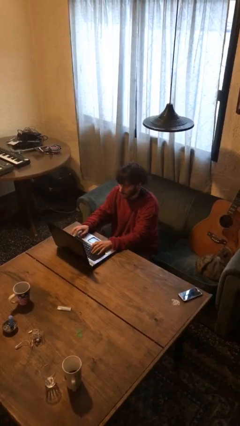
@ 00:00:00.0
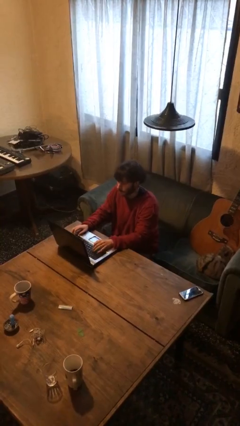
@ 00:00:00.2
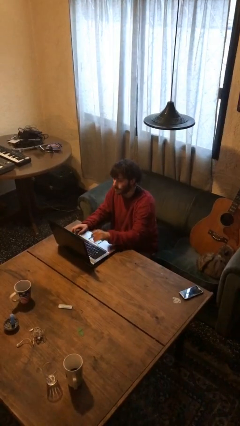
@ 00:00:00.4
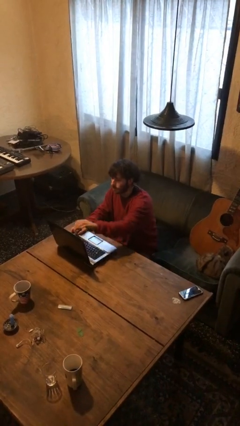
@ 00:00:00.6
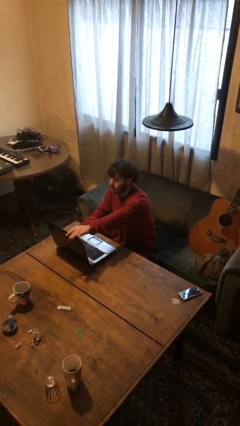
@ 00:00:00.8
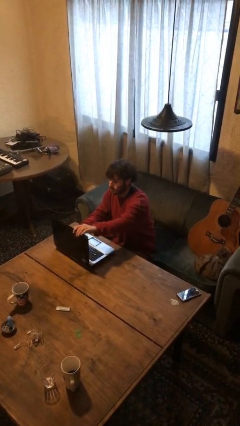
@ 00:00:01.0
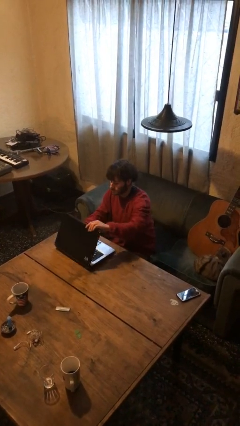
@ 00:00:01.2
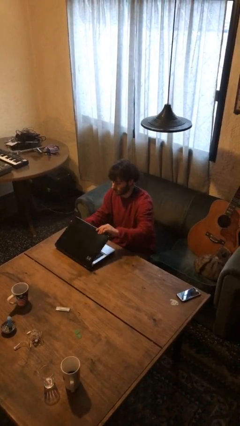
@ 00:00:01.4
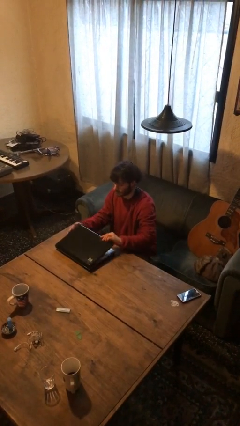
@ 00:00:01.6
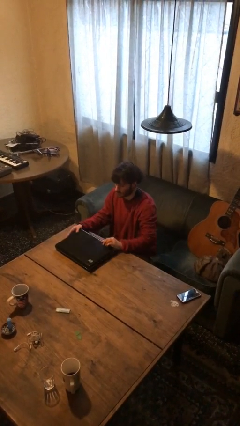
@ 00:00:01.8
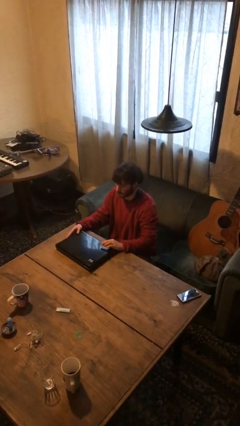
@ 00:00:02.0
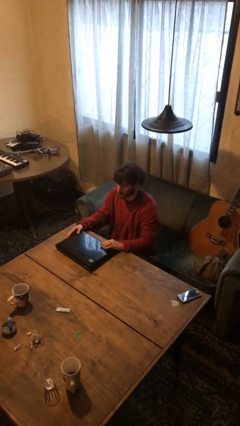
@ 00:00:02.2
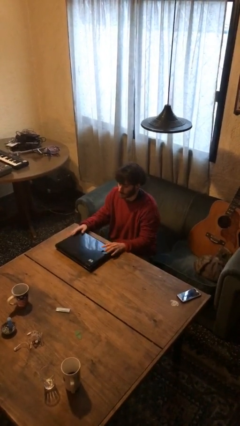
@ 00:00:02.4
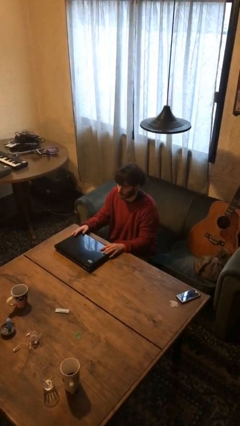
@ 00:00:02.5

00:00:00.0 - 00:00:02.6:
person closes laptop

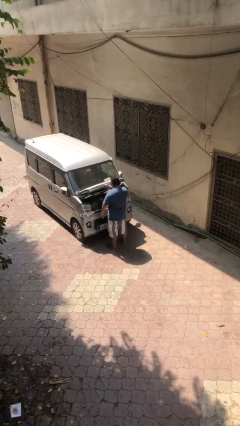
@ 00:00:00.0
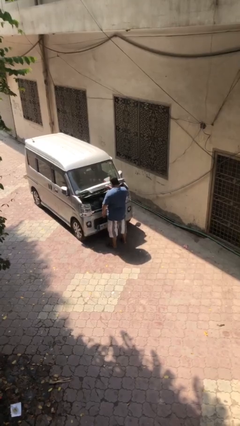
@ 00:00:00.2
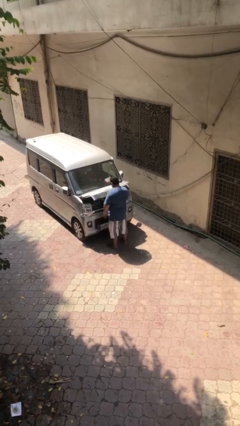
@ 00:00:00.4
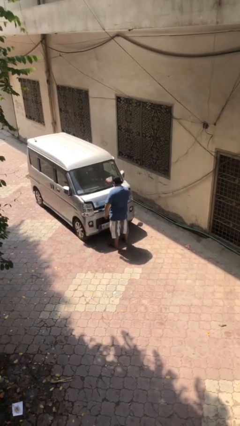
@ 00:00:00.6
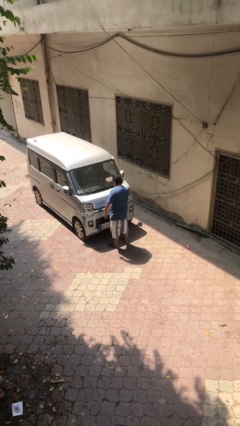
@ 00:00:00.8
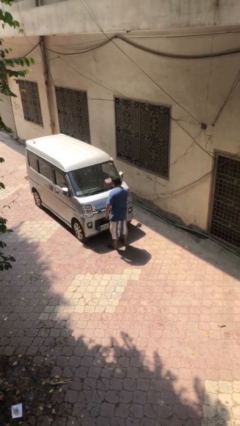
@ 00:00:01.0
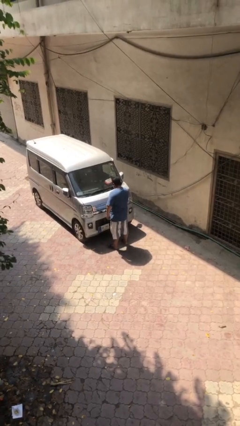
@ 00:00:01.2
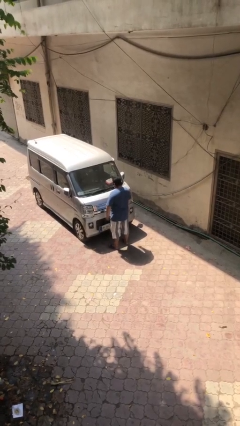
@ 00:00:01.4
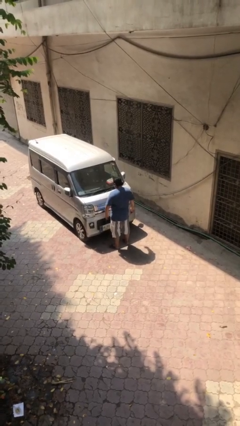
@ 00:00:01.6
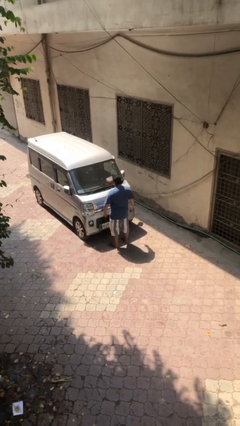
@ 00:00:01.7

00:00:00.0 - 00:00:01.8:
person closes car hood

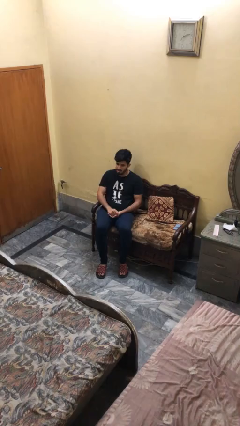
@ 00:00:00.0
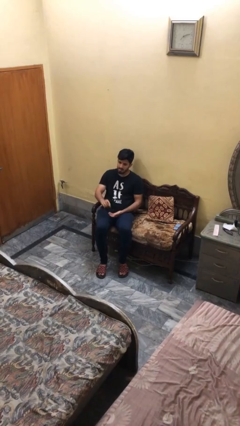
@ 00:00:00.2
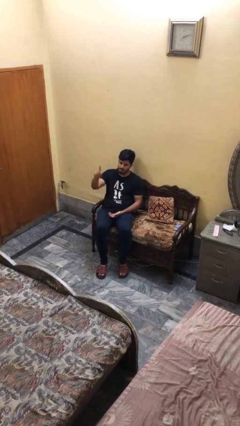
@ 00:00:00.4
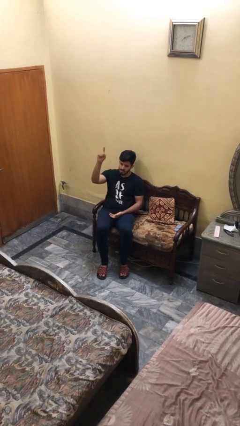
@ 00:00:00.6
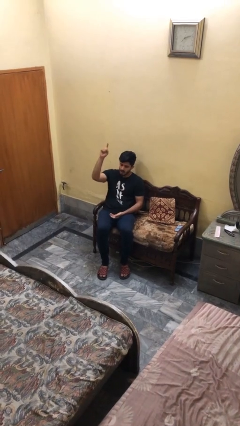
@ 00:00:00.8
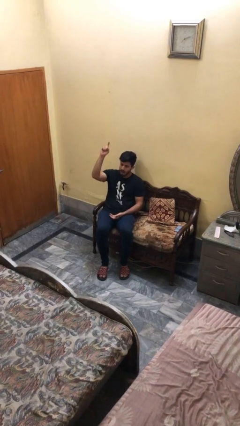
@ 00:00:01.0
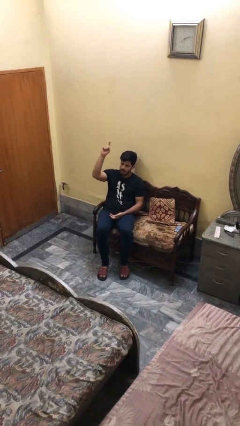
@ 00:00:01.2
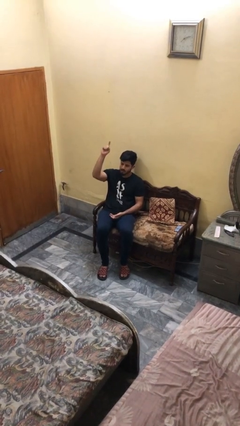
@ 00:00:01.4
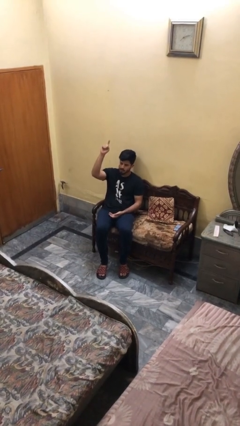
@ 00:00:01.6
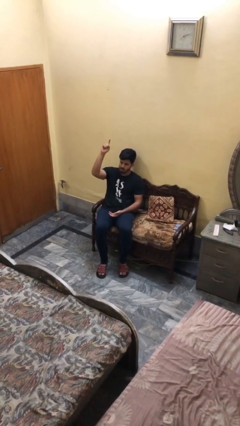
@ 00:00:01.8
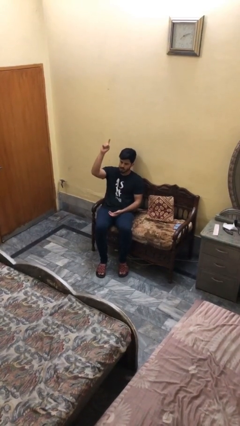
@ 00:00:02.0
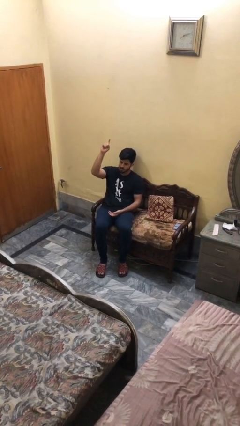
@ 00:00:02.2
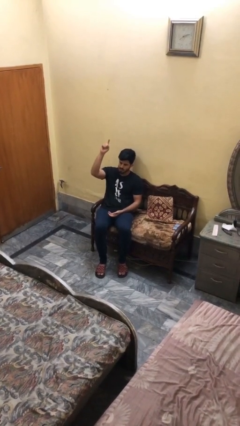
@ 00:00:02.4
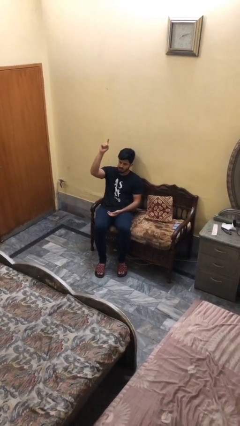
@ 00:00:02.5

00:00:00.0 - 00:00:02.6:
person gestures raise hand

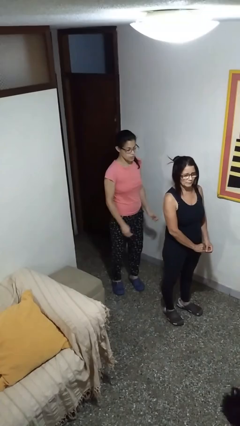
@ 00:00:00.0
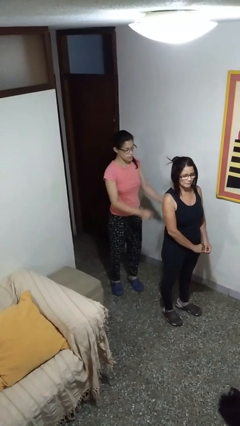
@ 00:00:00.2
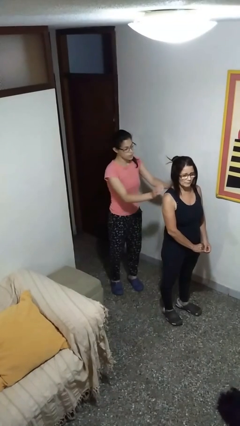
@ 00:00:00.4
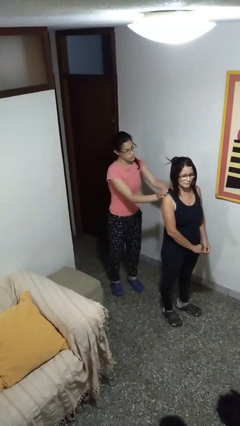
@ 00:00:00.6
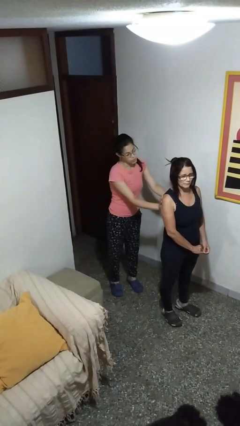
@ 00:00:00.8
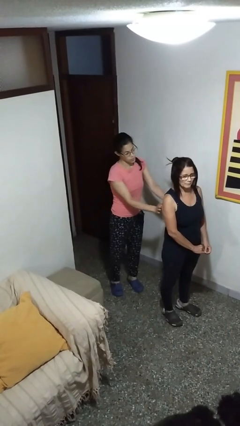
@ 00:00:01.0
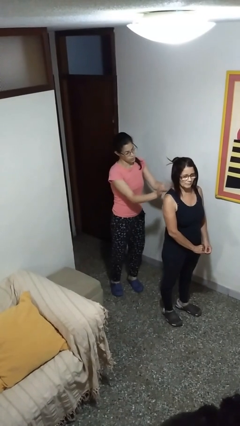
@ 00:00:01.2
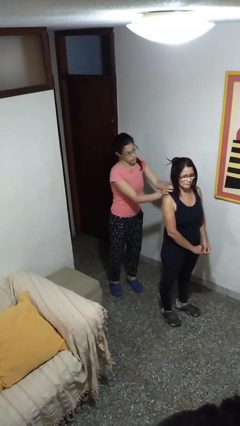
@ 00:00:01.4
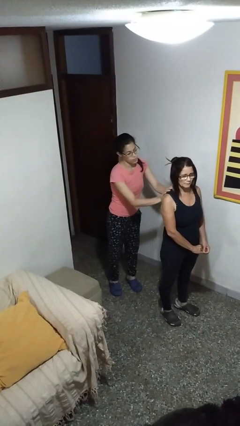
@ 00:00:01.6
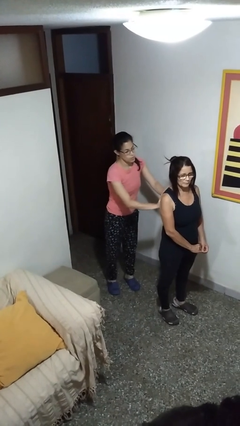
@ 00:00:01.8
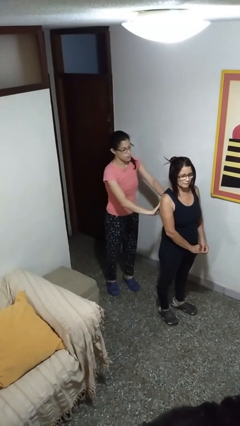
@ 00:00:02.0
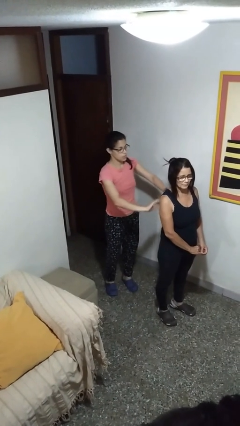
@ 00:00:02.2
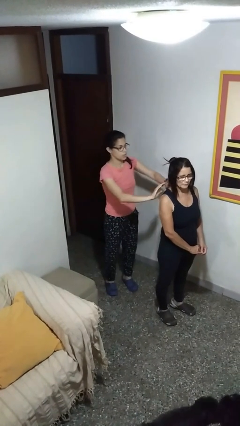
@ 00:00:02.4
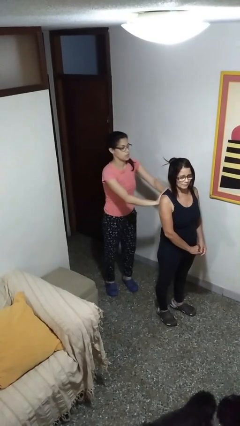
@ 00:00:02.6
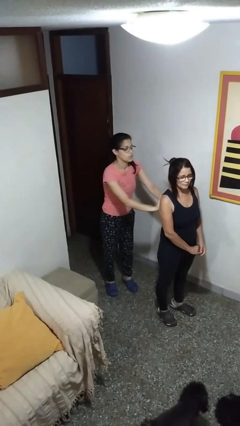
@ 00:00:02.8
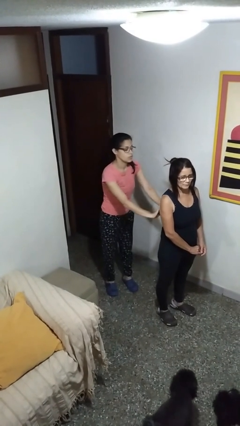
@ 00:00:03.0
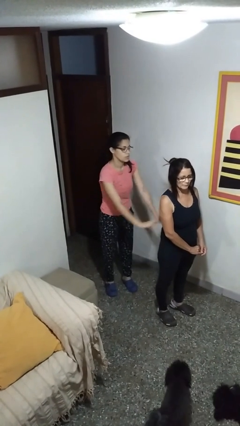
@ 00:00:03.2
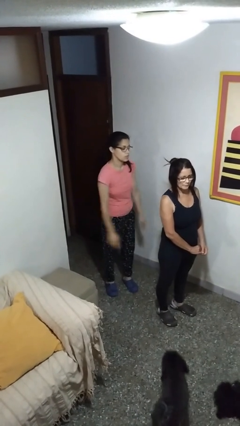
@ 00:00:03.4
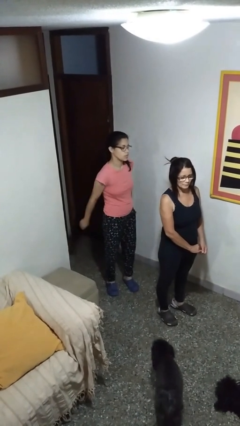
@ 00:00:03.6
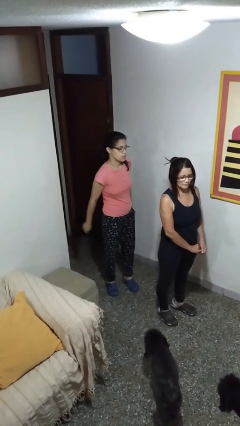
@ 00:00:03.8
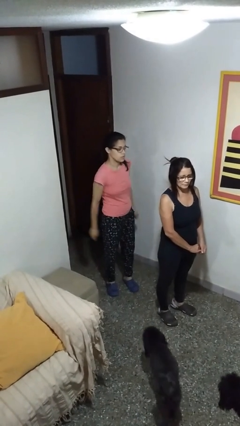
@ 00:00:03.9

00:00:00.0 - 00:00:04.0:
person touches back of person

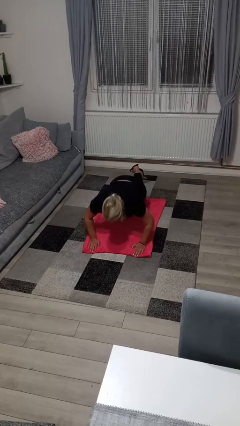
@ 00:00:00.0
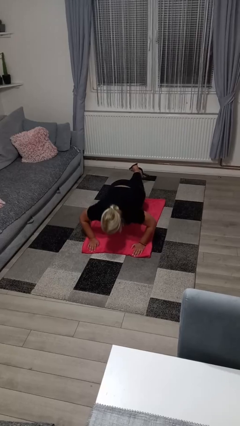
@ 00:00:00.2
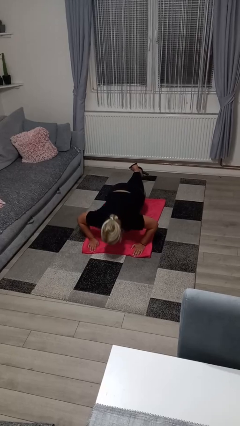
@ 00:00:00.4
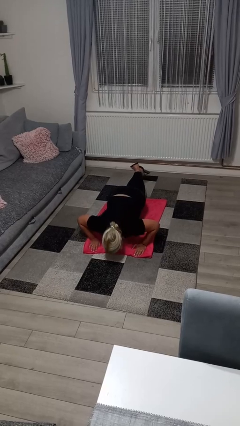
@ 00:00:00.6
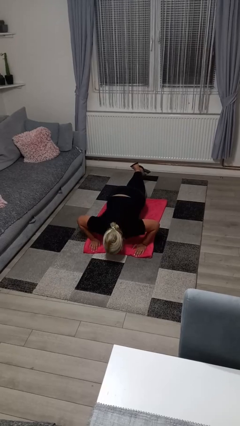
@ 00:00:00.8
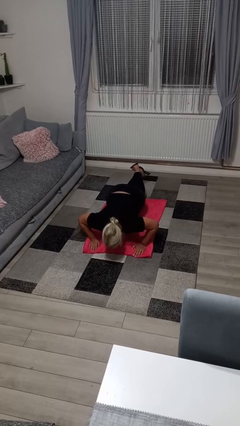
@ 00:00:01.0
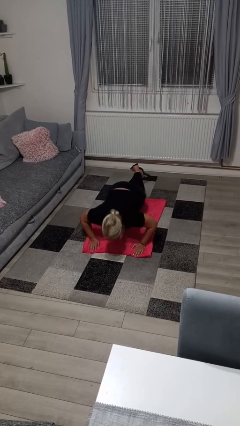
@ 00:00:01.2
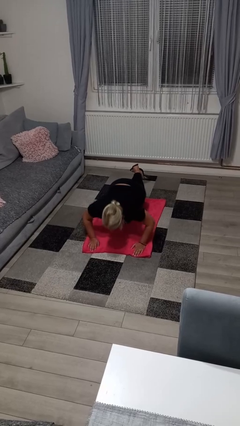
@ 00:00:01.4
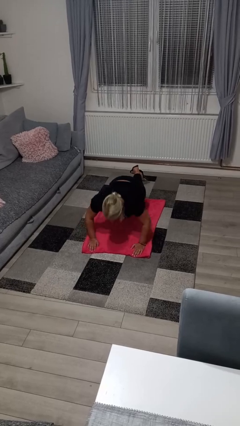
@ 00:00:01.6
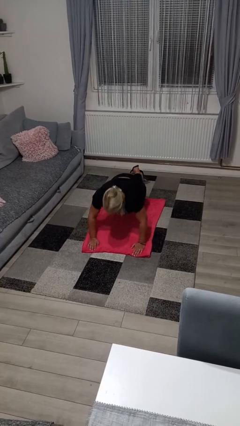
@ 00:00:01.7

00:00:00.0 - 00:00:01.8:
person exercises with pushup

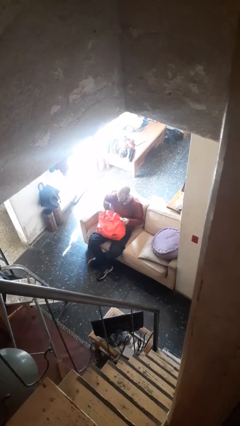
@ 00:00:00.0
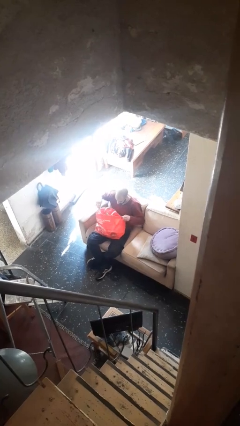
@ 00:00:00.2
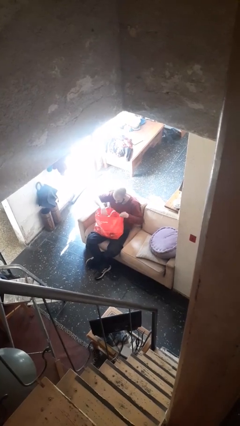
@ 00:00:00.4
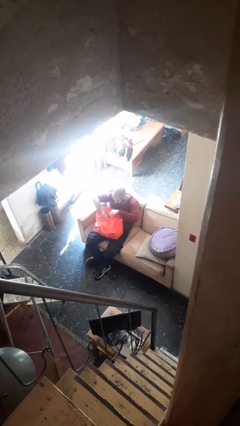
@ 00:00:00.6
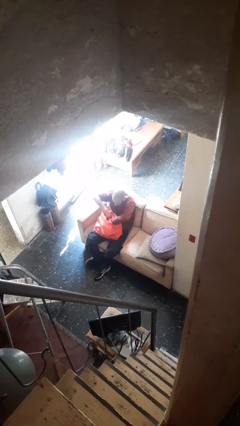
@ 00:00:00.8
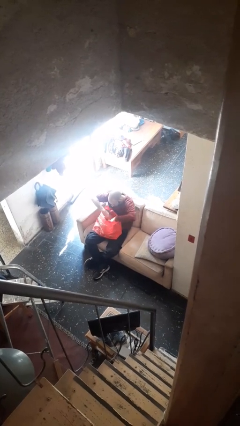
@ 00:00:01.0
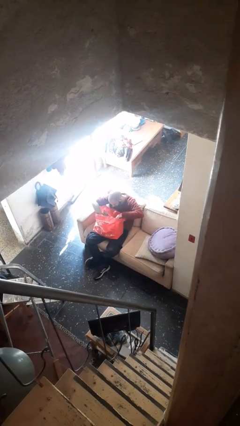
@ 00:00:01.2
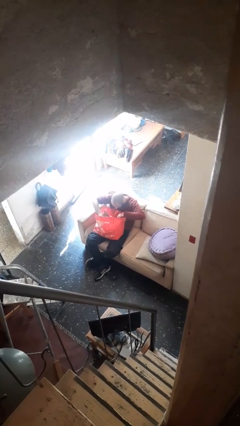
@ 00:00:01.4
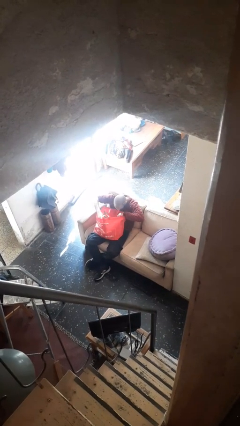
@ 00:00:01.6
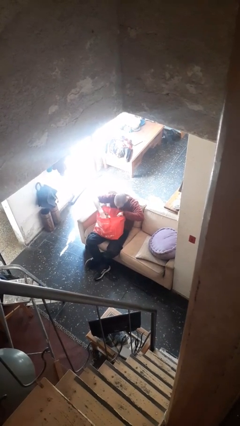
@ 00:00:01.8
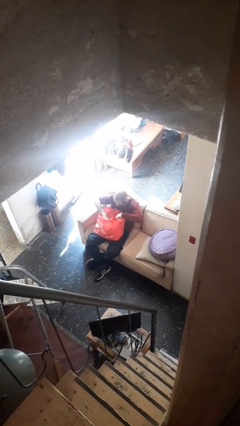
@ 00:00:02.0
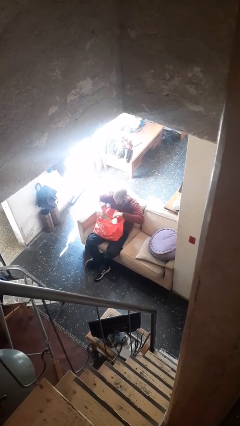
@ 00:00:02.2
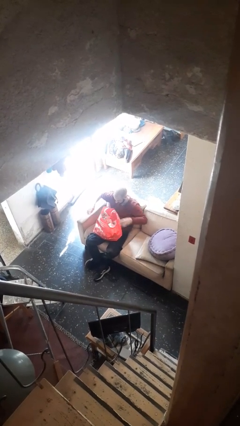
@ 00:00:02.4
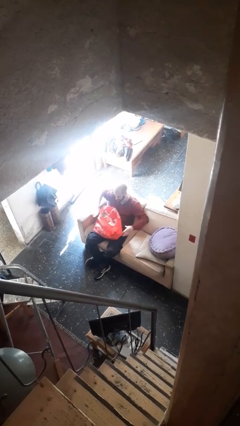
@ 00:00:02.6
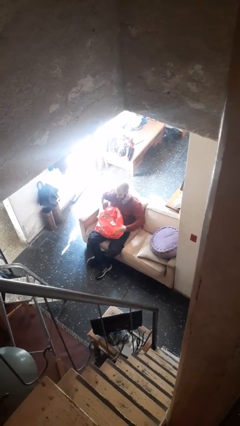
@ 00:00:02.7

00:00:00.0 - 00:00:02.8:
person searches in bag

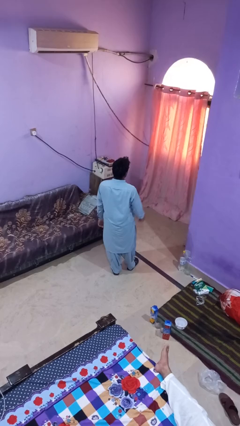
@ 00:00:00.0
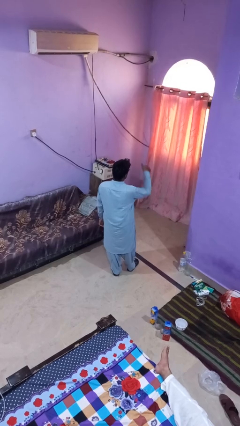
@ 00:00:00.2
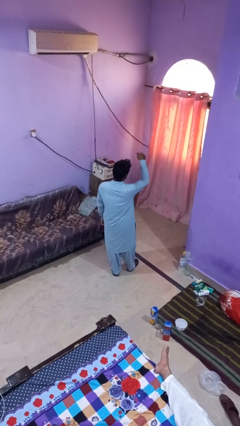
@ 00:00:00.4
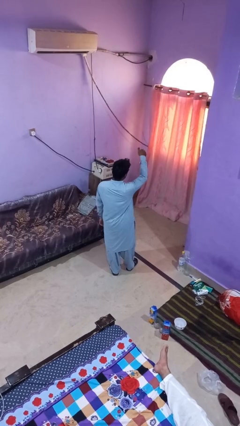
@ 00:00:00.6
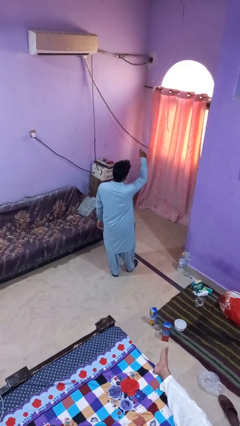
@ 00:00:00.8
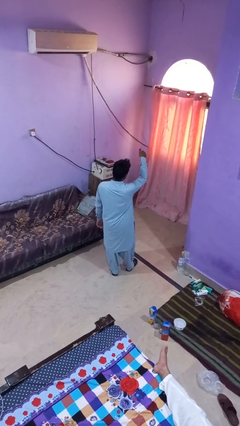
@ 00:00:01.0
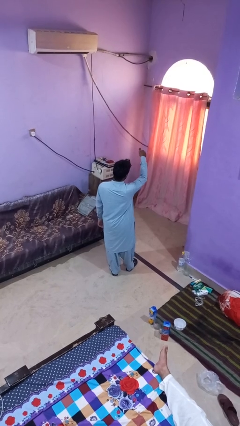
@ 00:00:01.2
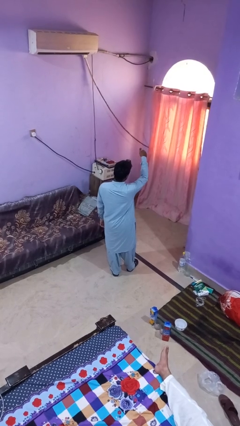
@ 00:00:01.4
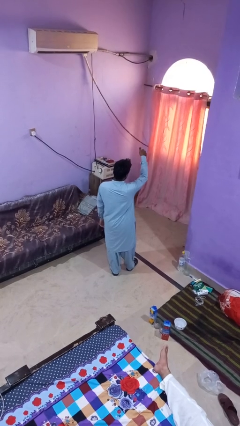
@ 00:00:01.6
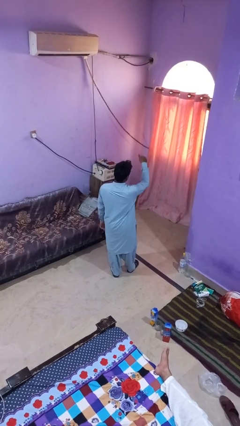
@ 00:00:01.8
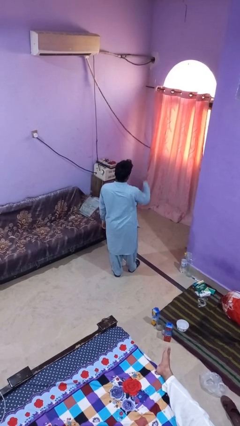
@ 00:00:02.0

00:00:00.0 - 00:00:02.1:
person gestures thumbs up
